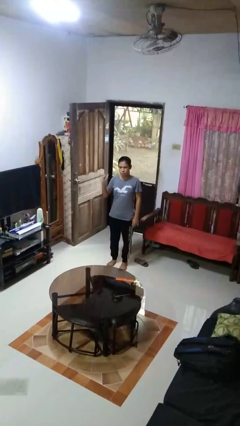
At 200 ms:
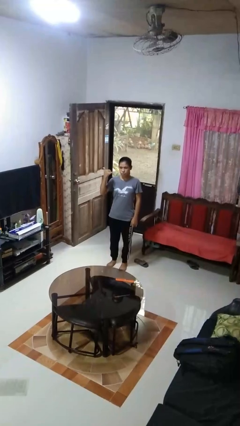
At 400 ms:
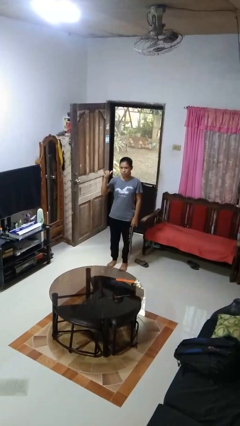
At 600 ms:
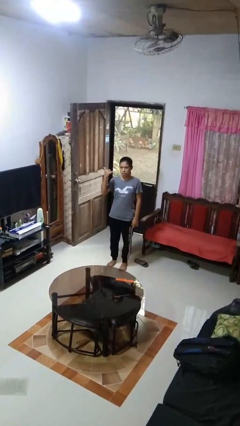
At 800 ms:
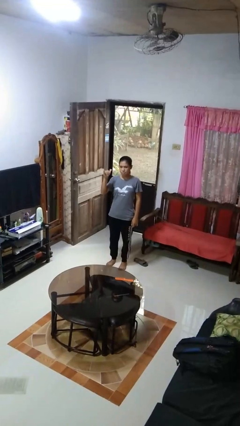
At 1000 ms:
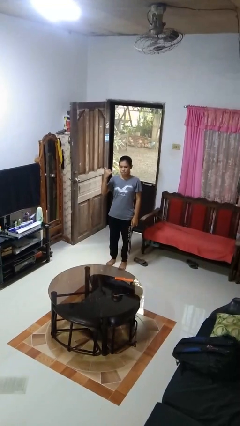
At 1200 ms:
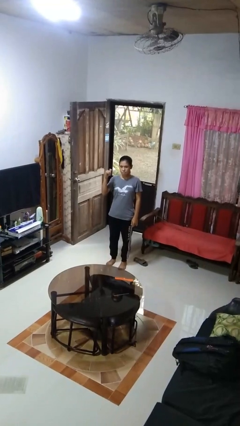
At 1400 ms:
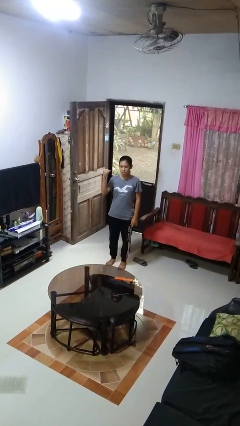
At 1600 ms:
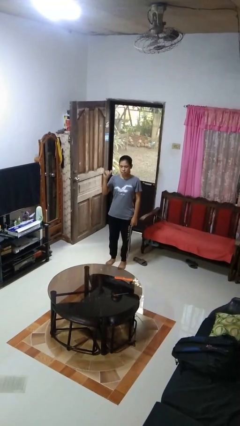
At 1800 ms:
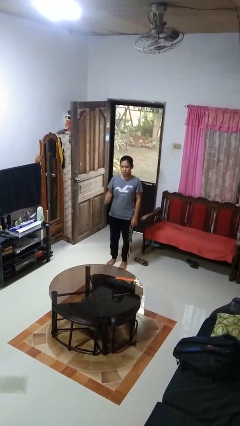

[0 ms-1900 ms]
person gestures hang loose

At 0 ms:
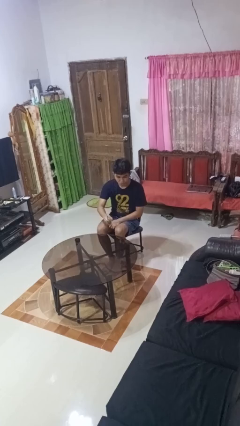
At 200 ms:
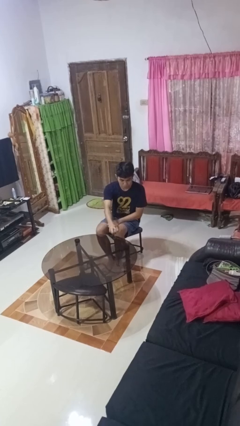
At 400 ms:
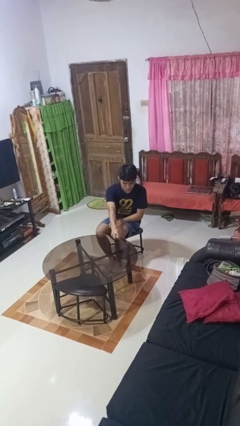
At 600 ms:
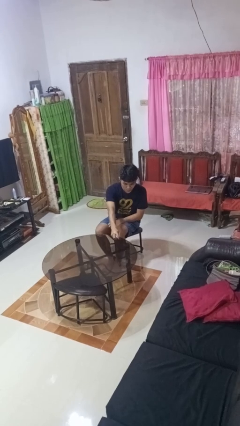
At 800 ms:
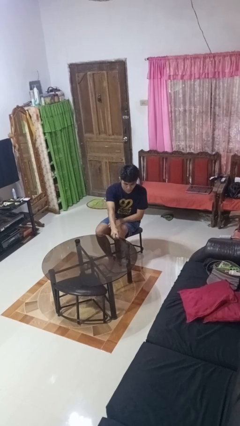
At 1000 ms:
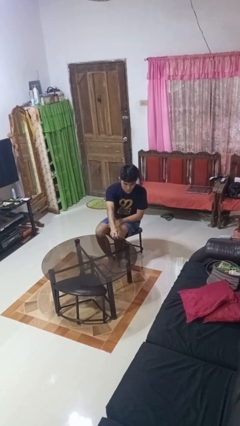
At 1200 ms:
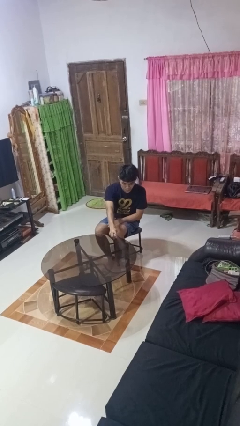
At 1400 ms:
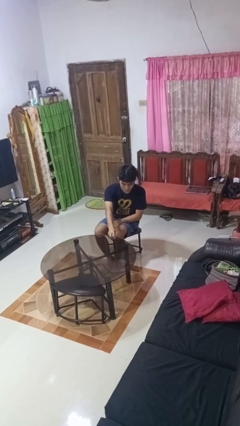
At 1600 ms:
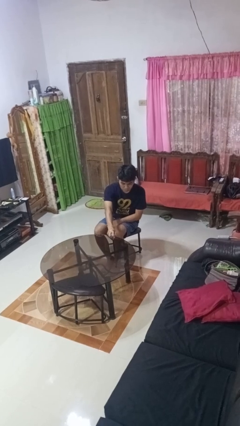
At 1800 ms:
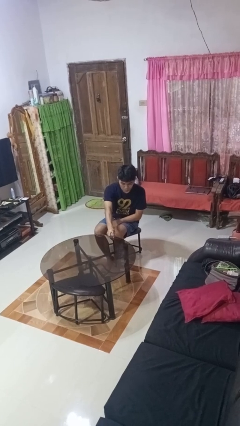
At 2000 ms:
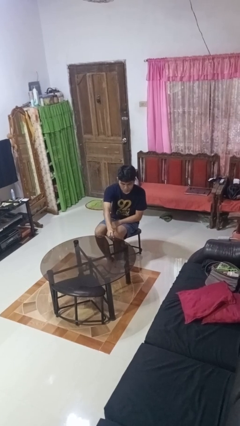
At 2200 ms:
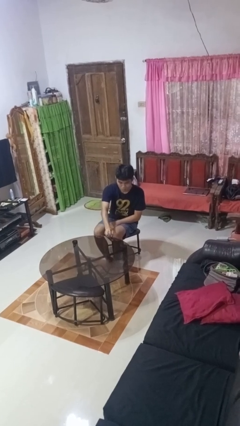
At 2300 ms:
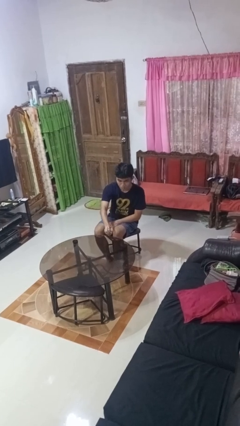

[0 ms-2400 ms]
person sprays from bottle

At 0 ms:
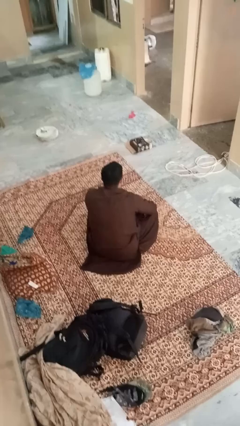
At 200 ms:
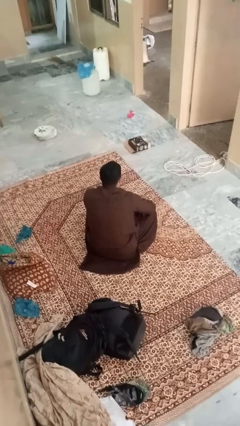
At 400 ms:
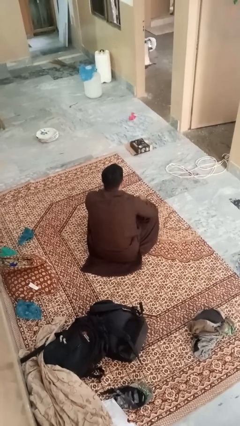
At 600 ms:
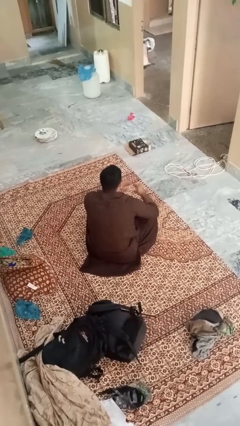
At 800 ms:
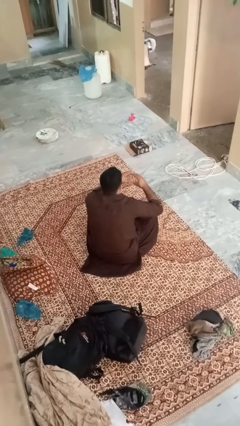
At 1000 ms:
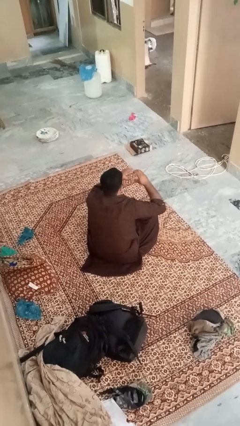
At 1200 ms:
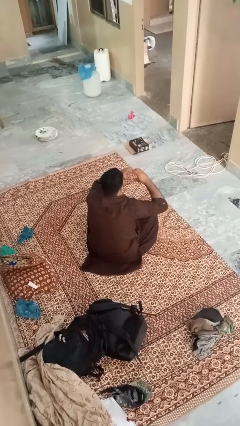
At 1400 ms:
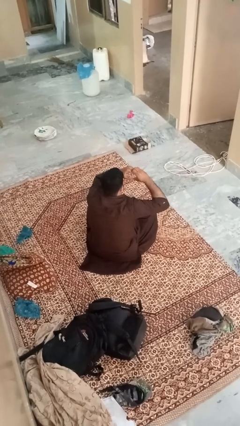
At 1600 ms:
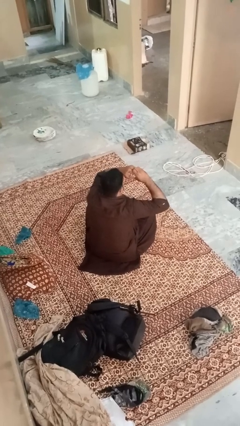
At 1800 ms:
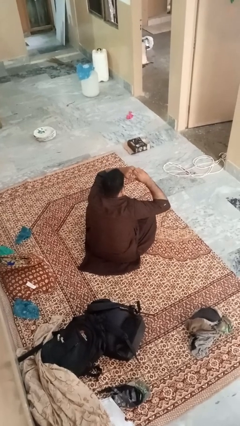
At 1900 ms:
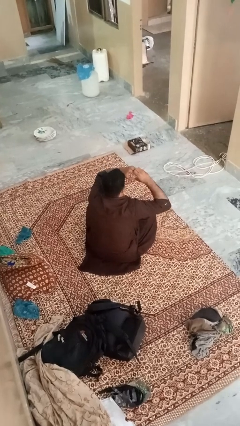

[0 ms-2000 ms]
person gestures heart

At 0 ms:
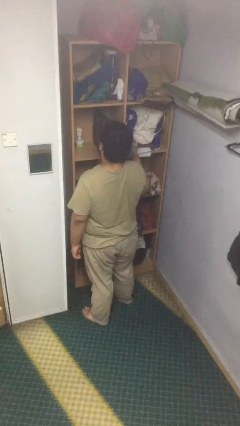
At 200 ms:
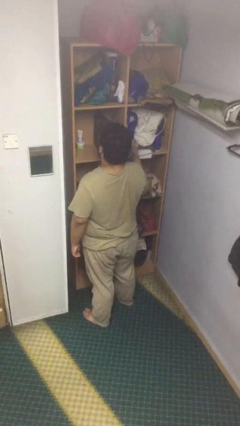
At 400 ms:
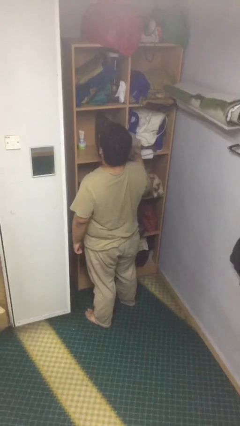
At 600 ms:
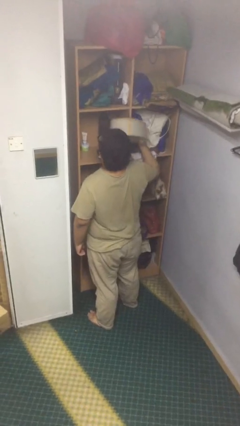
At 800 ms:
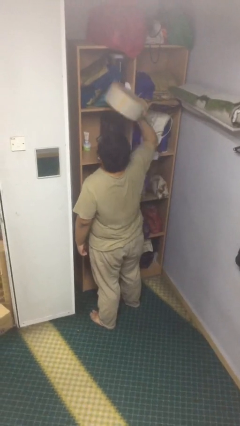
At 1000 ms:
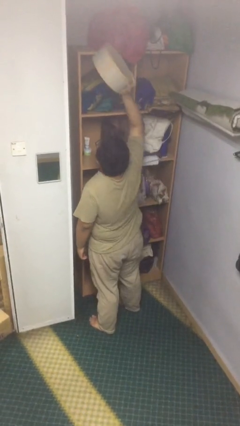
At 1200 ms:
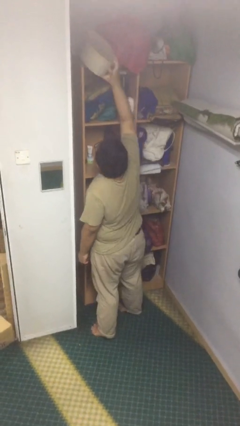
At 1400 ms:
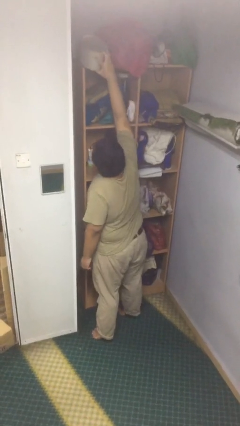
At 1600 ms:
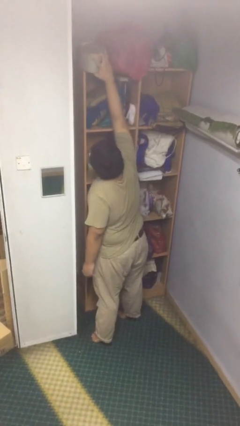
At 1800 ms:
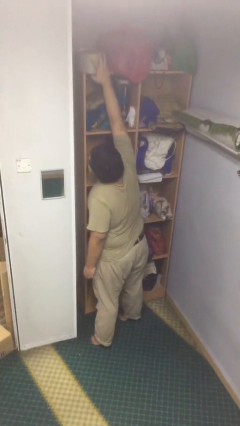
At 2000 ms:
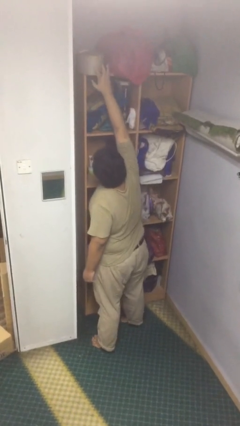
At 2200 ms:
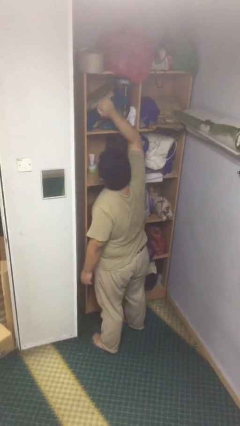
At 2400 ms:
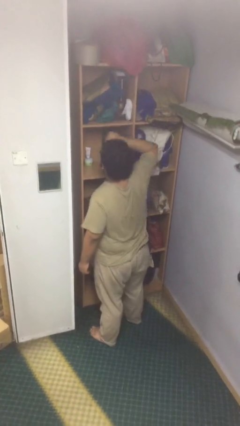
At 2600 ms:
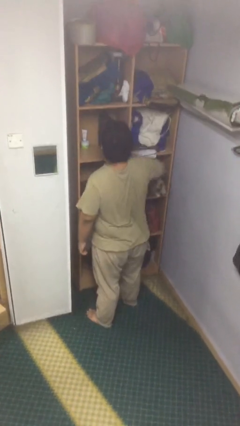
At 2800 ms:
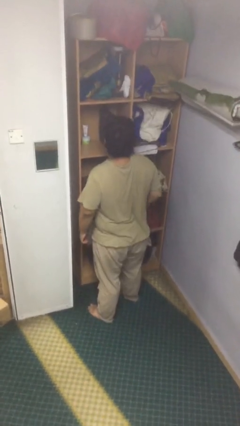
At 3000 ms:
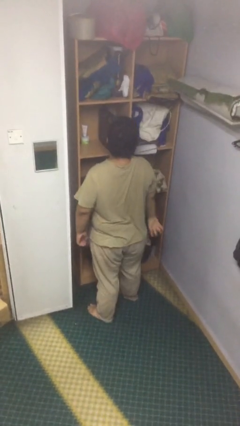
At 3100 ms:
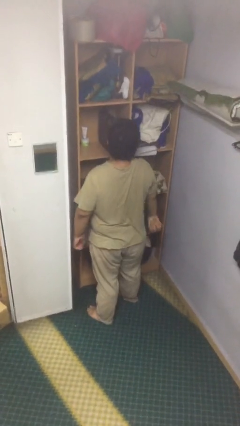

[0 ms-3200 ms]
person puts down object on shelf

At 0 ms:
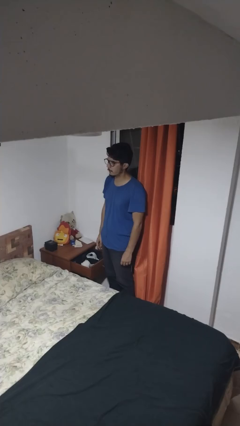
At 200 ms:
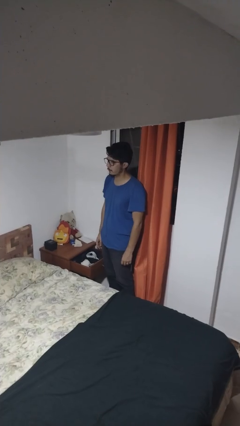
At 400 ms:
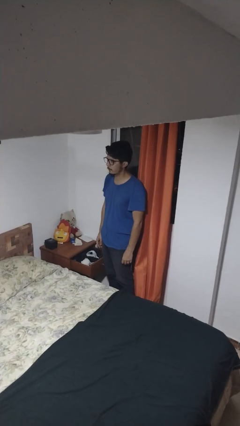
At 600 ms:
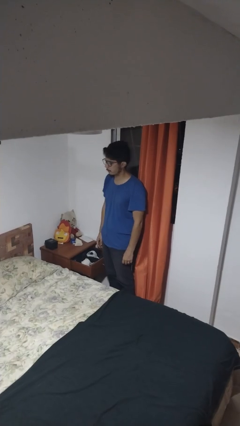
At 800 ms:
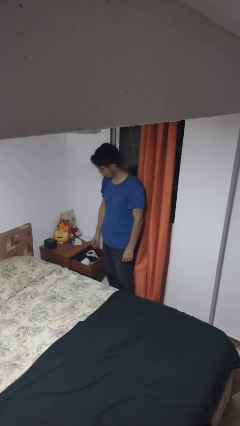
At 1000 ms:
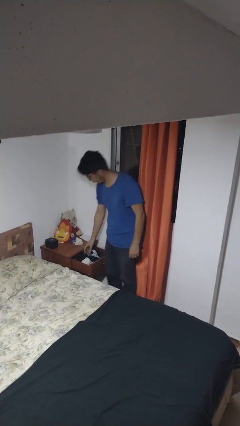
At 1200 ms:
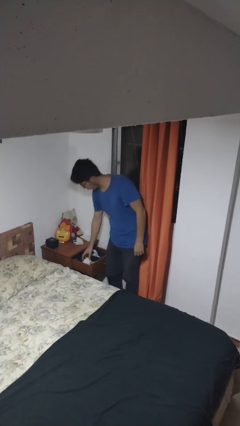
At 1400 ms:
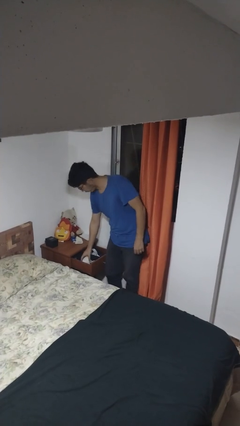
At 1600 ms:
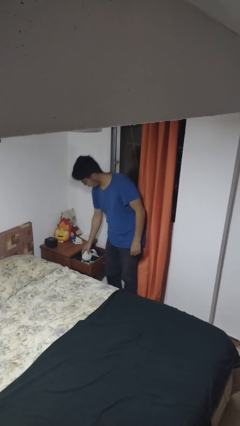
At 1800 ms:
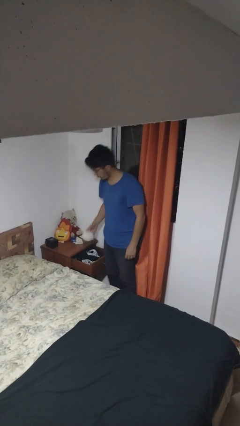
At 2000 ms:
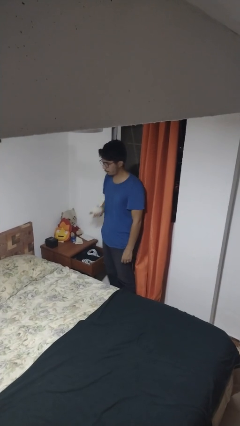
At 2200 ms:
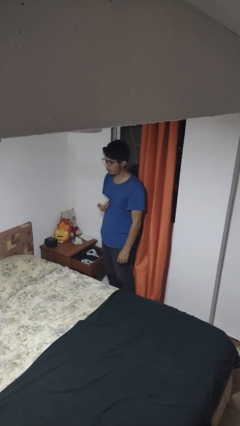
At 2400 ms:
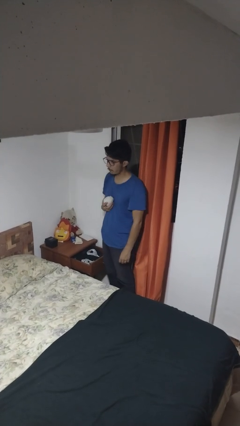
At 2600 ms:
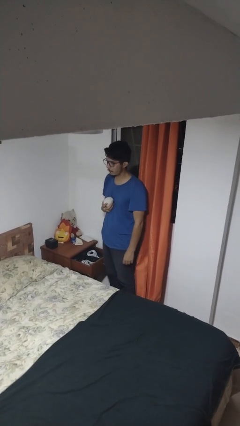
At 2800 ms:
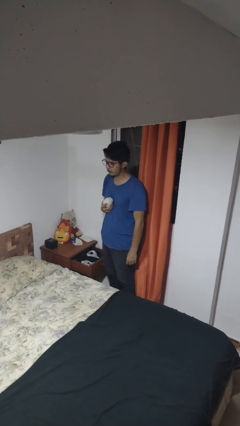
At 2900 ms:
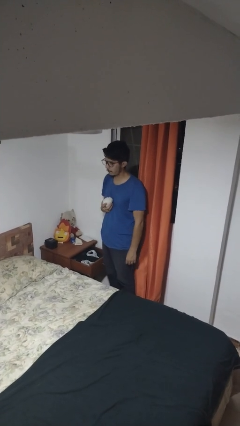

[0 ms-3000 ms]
person takes clothes from dresser

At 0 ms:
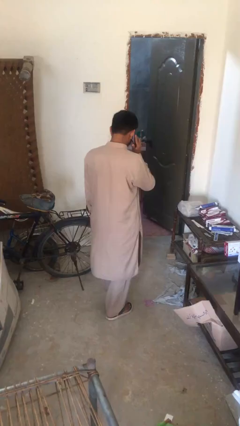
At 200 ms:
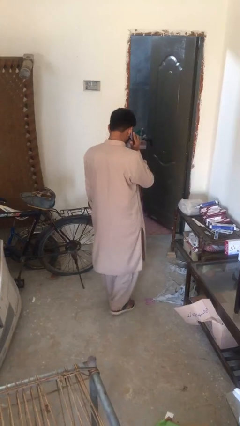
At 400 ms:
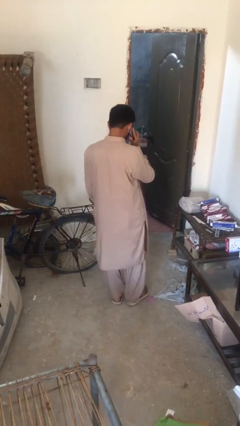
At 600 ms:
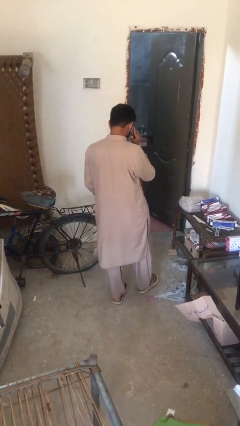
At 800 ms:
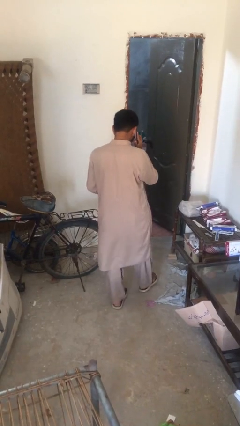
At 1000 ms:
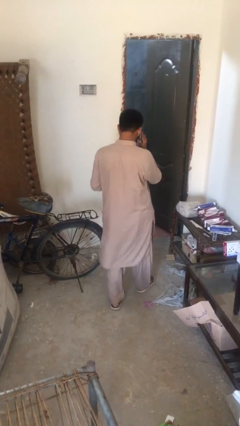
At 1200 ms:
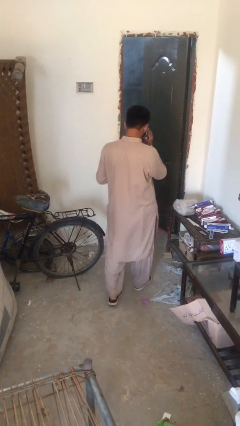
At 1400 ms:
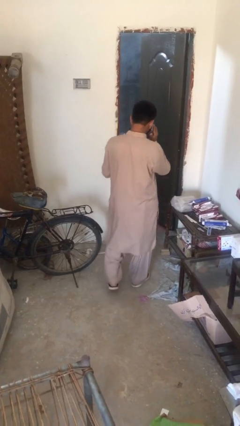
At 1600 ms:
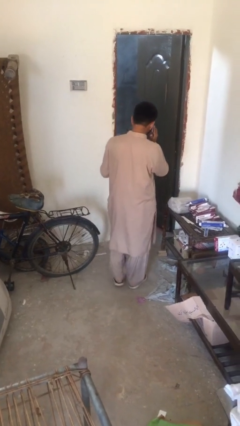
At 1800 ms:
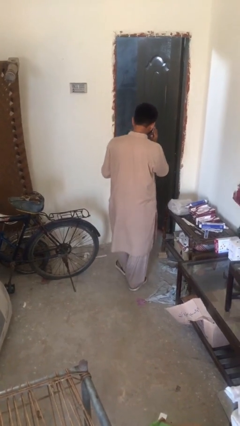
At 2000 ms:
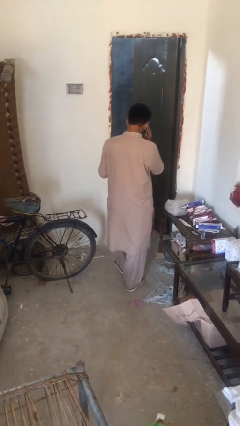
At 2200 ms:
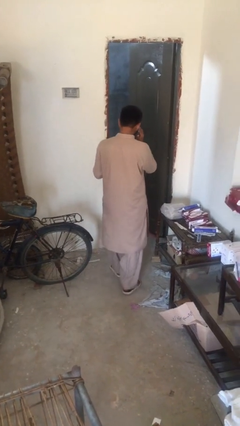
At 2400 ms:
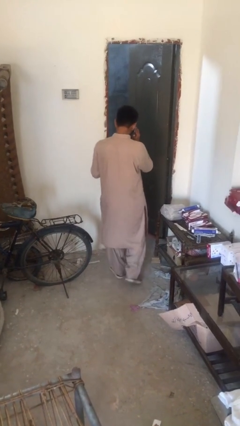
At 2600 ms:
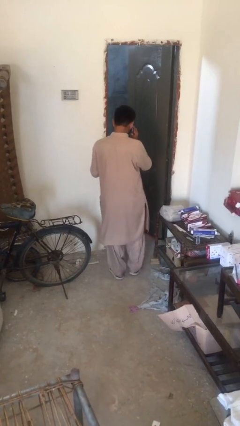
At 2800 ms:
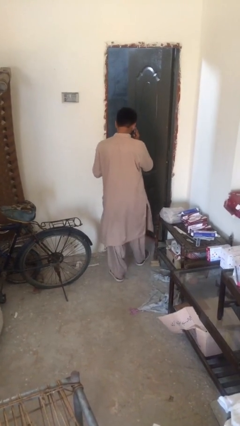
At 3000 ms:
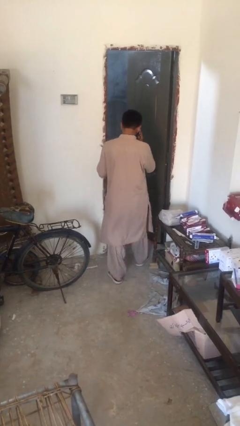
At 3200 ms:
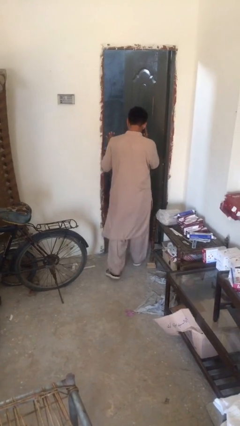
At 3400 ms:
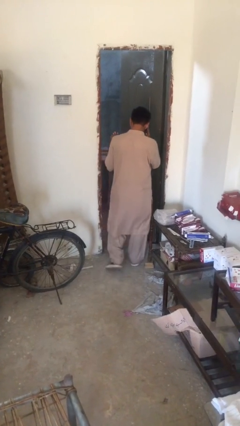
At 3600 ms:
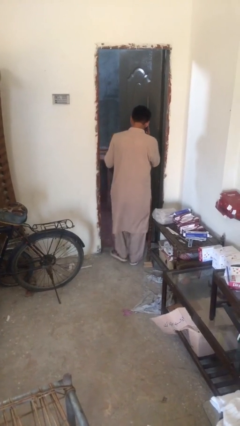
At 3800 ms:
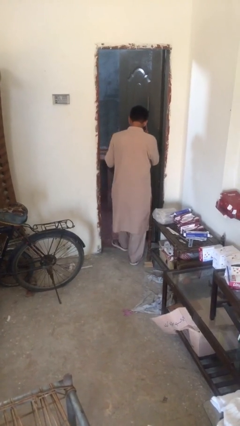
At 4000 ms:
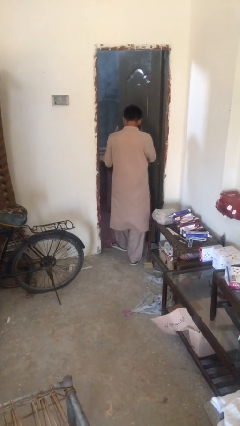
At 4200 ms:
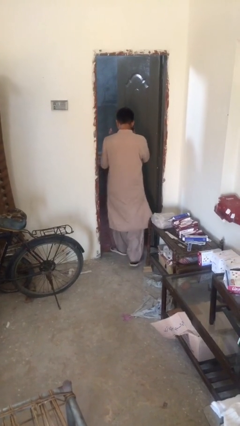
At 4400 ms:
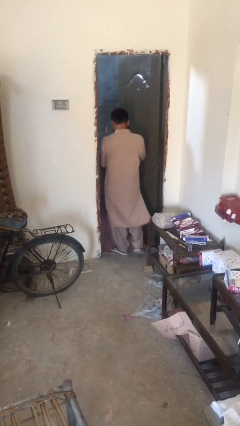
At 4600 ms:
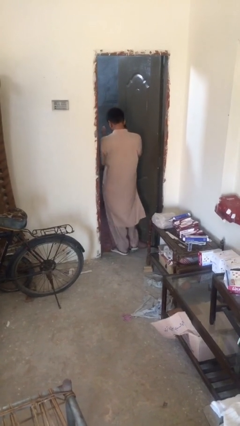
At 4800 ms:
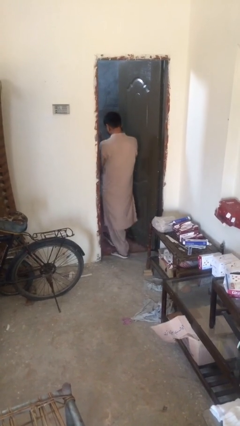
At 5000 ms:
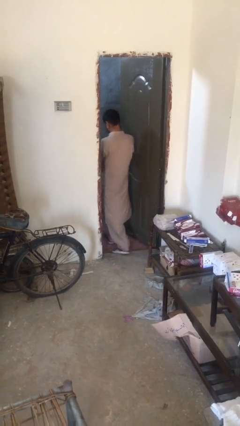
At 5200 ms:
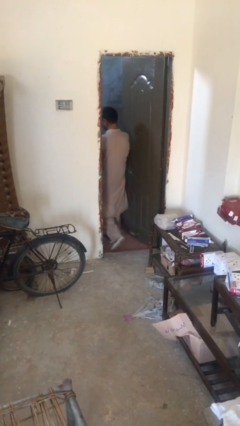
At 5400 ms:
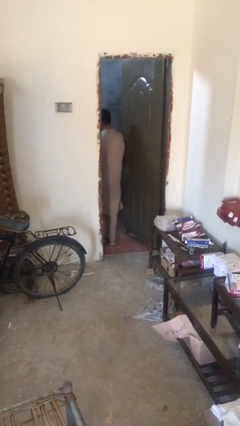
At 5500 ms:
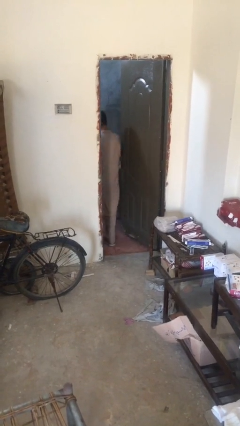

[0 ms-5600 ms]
person exits scene through structure
